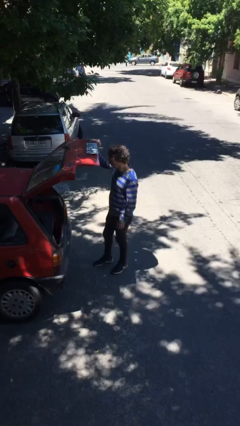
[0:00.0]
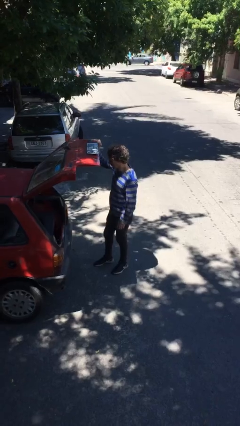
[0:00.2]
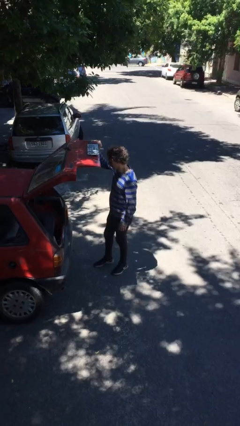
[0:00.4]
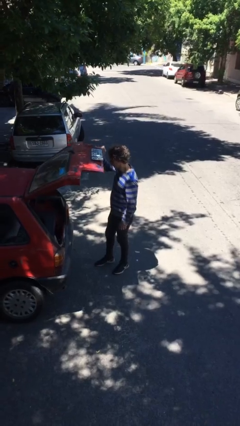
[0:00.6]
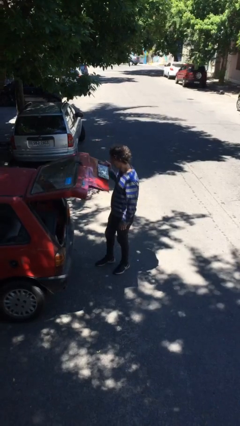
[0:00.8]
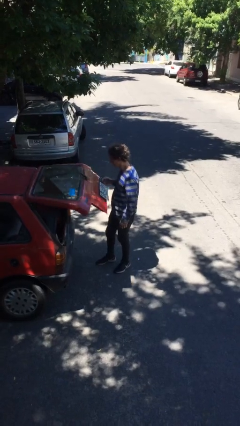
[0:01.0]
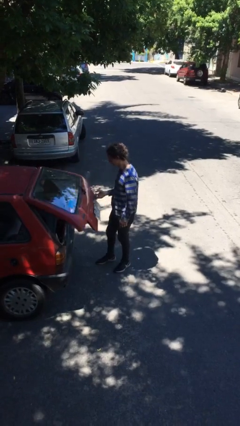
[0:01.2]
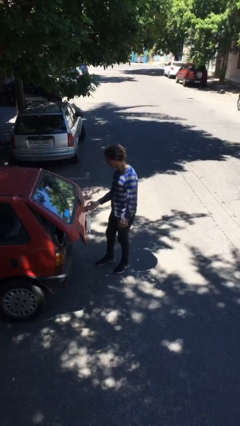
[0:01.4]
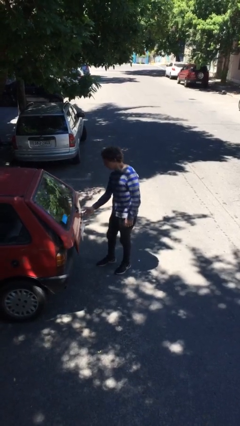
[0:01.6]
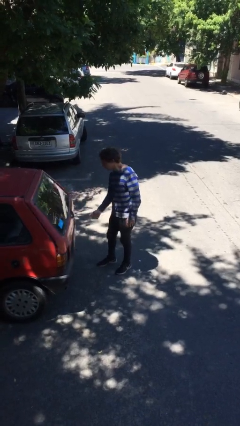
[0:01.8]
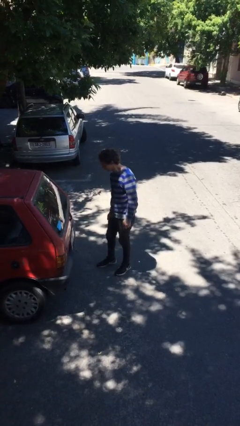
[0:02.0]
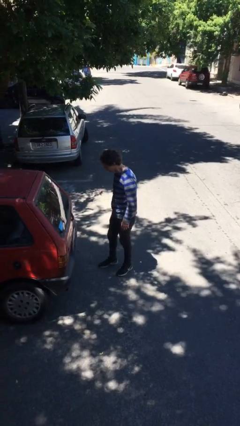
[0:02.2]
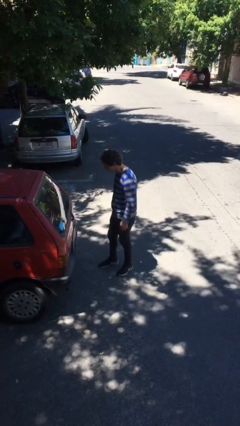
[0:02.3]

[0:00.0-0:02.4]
person closes car trunk

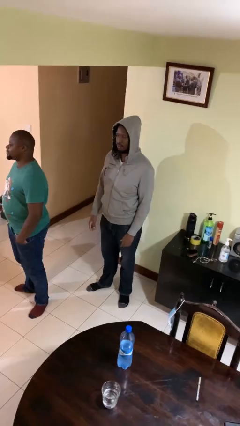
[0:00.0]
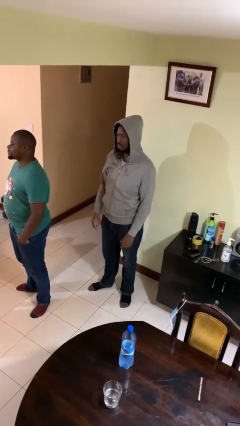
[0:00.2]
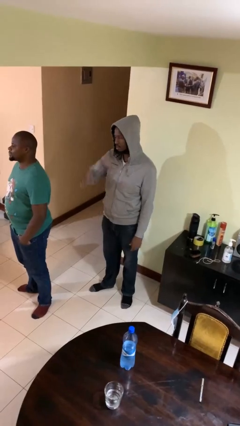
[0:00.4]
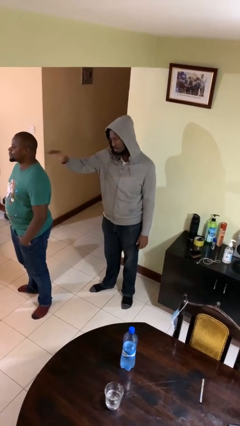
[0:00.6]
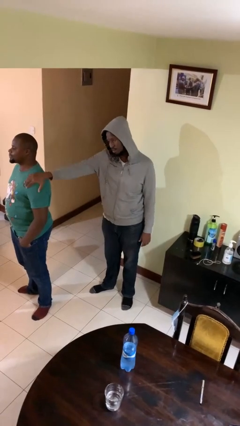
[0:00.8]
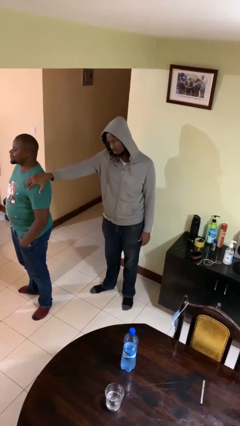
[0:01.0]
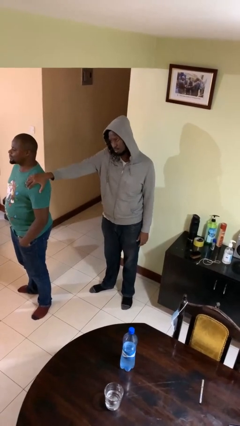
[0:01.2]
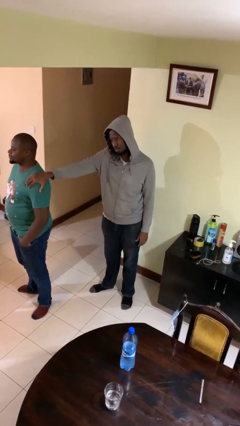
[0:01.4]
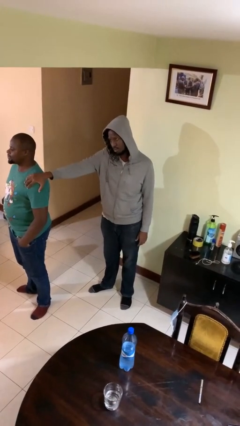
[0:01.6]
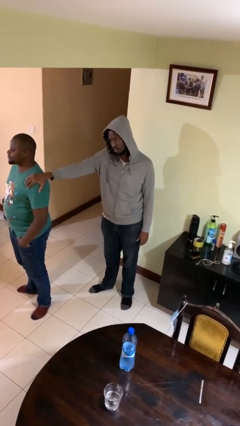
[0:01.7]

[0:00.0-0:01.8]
person grabs person by shoulder

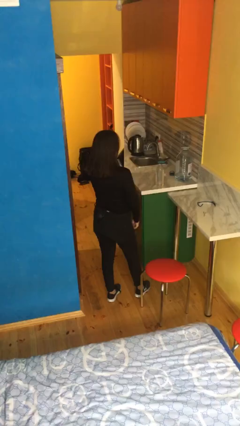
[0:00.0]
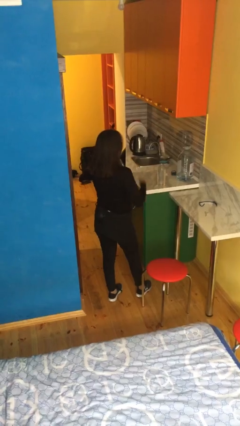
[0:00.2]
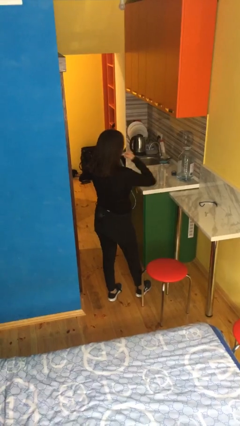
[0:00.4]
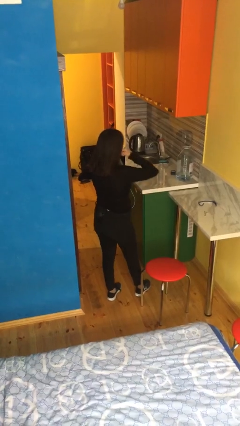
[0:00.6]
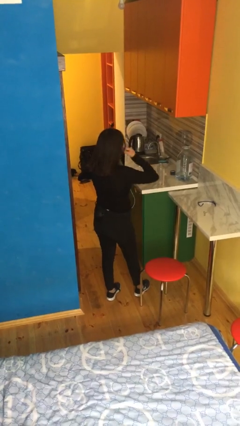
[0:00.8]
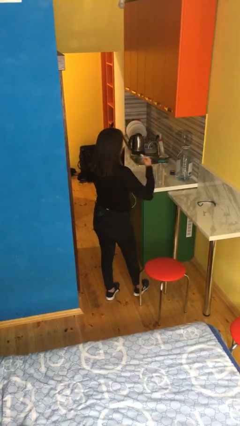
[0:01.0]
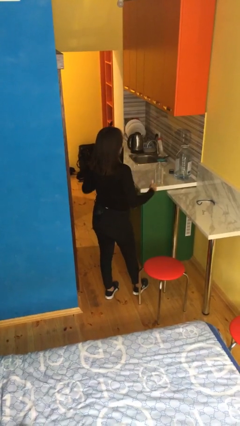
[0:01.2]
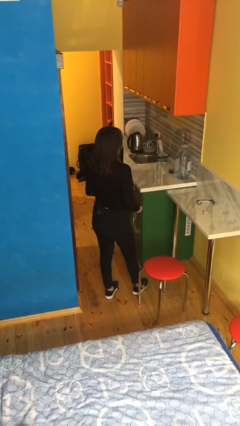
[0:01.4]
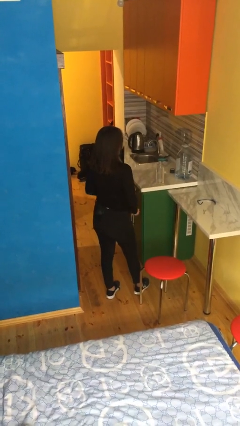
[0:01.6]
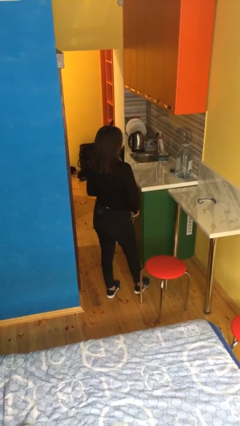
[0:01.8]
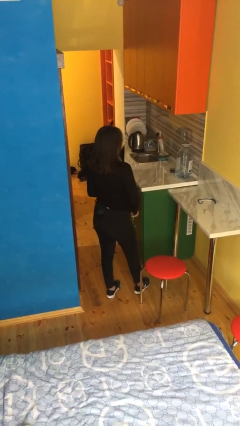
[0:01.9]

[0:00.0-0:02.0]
person takes off headphones

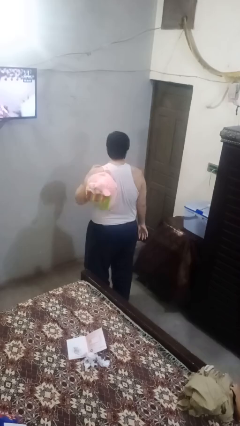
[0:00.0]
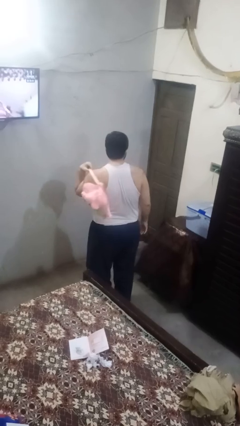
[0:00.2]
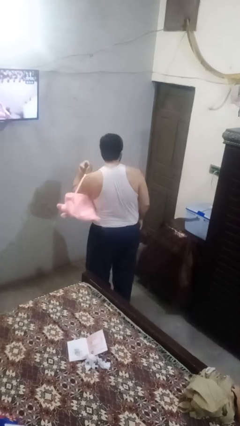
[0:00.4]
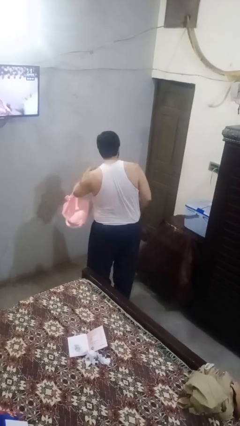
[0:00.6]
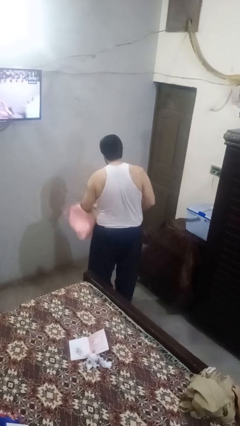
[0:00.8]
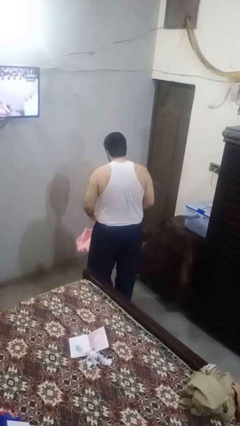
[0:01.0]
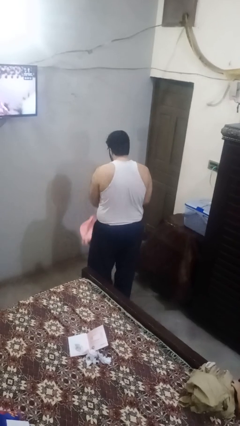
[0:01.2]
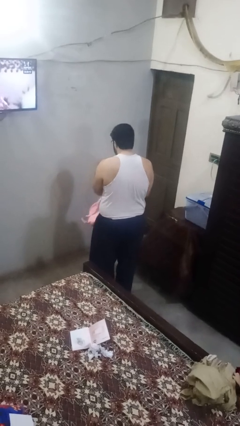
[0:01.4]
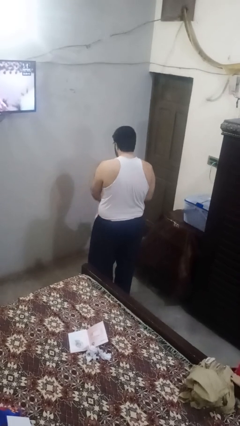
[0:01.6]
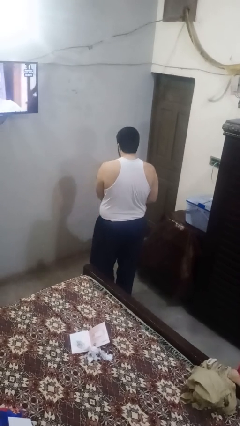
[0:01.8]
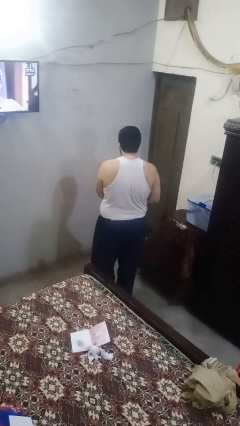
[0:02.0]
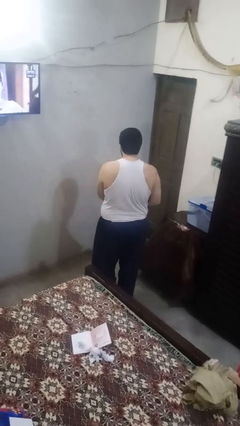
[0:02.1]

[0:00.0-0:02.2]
person takes off backpack

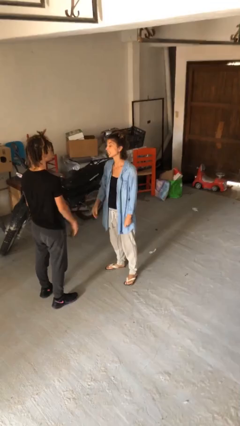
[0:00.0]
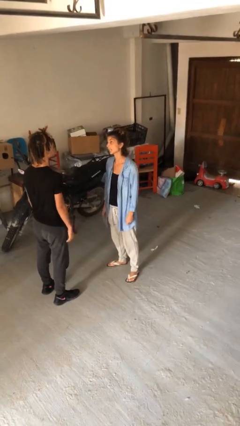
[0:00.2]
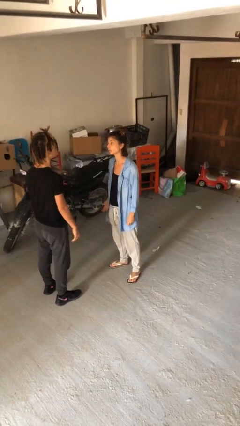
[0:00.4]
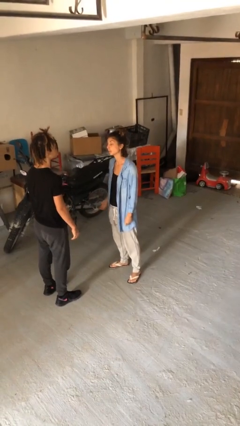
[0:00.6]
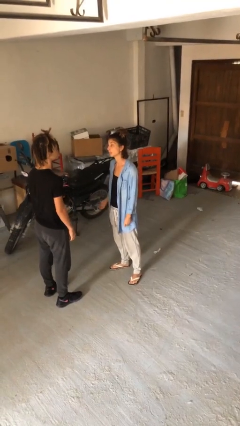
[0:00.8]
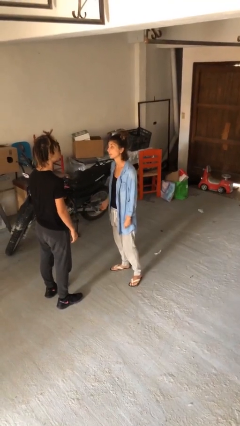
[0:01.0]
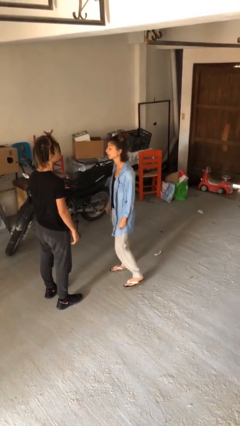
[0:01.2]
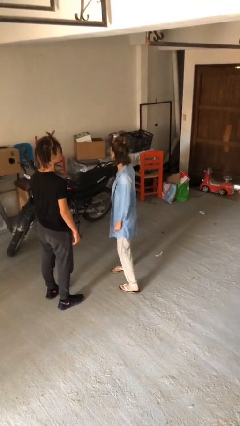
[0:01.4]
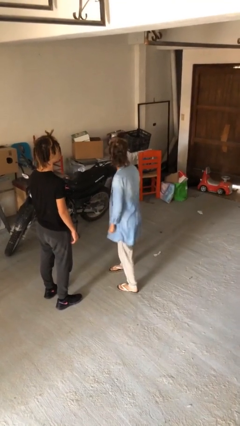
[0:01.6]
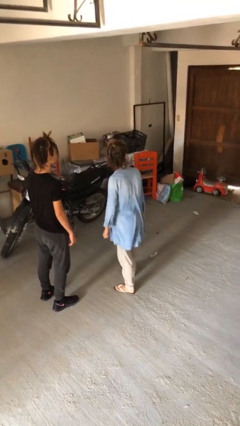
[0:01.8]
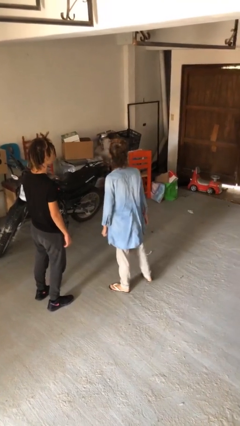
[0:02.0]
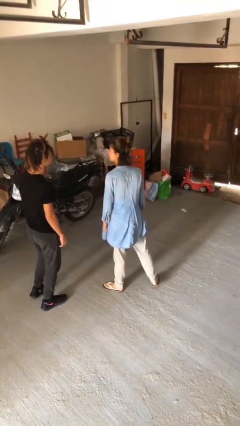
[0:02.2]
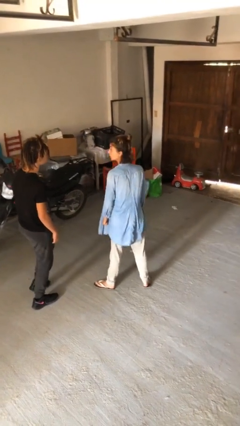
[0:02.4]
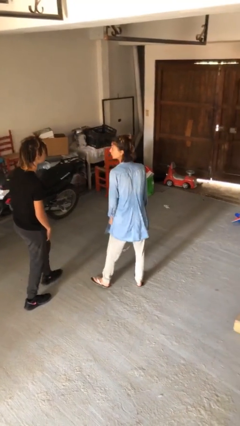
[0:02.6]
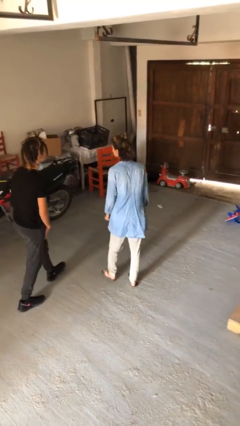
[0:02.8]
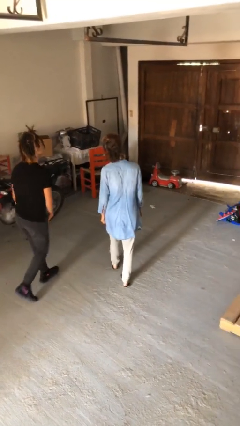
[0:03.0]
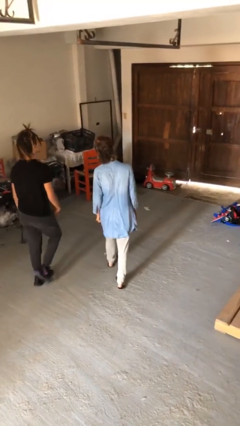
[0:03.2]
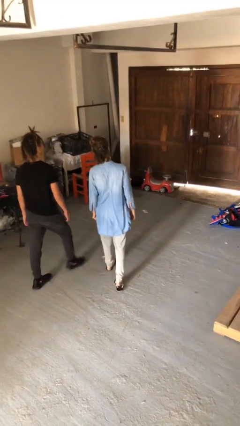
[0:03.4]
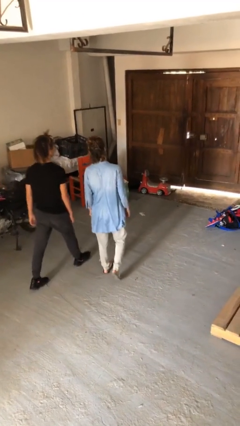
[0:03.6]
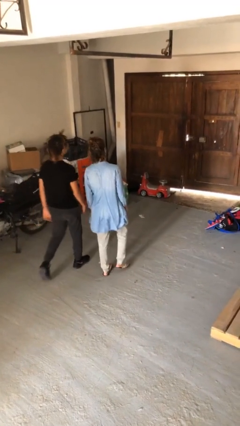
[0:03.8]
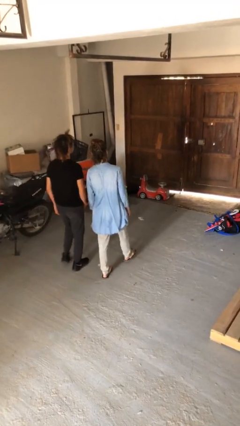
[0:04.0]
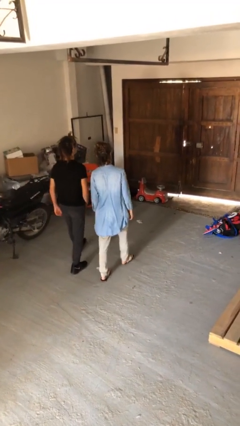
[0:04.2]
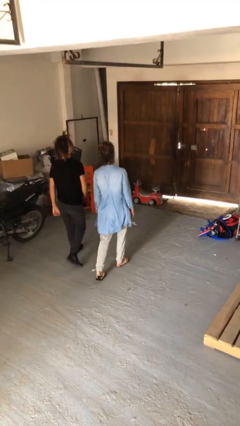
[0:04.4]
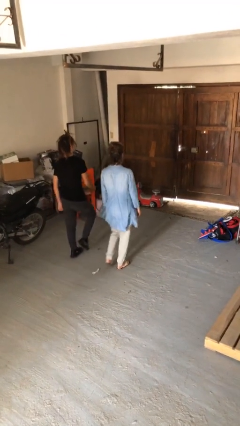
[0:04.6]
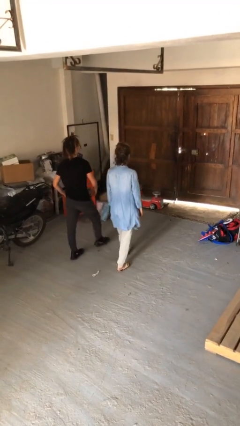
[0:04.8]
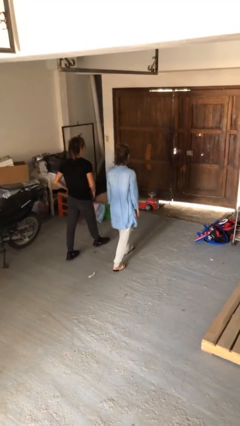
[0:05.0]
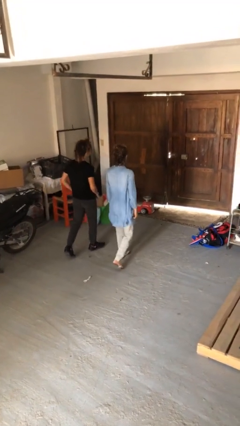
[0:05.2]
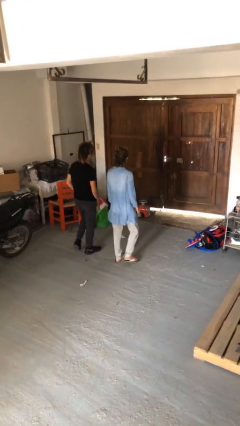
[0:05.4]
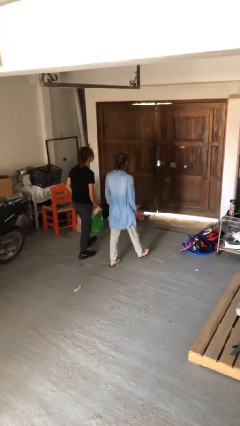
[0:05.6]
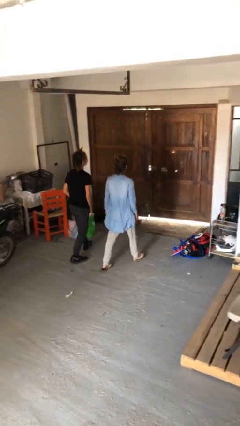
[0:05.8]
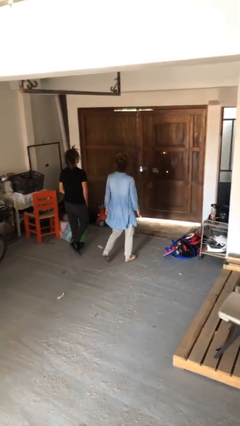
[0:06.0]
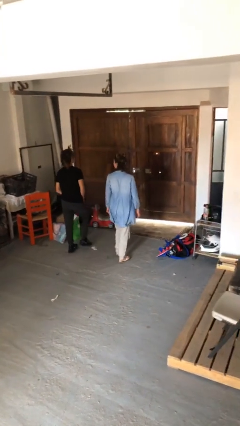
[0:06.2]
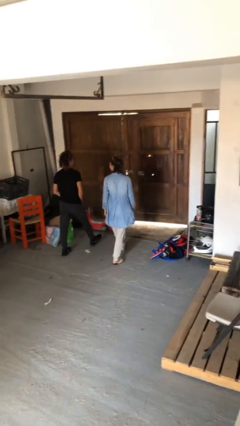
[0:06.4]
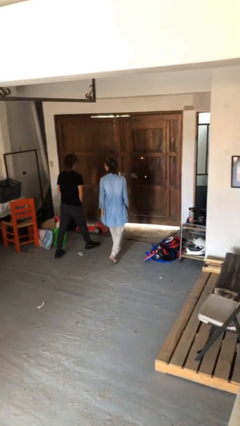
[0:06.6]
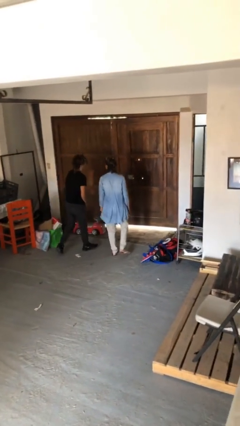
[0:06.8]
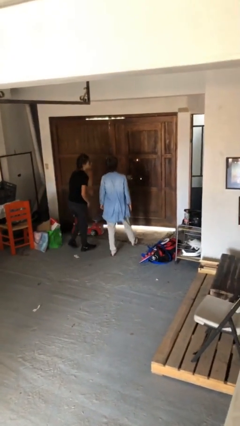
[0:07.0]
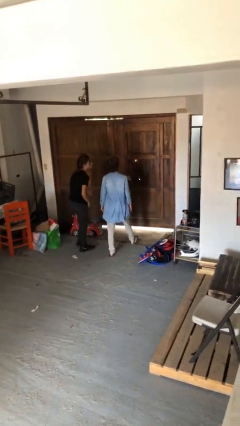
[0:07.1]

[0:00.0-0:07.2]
person talks to person

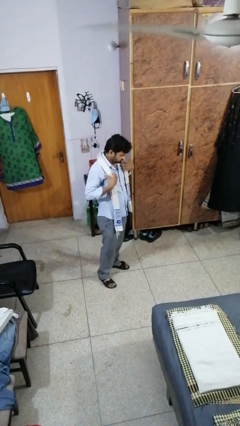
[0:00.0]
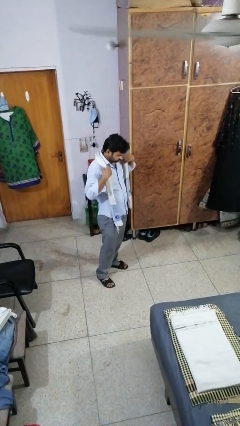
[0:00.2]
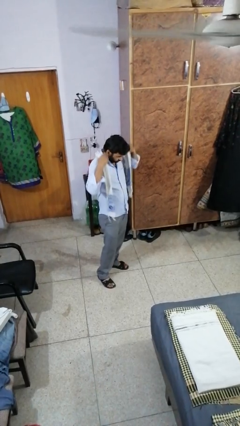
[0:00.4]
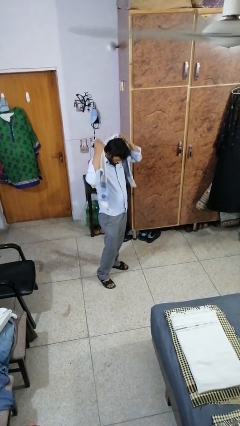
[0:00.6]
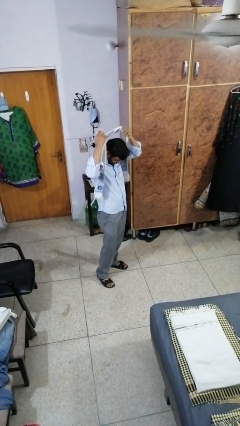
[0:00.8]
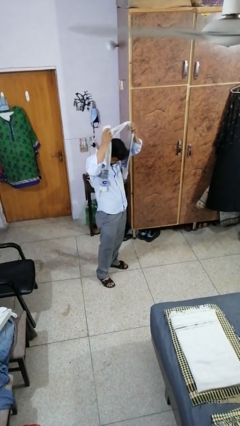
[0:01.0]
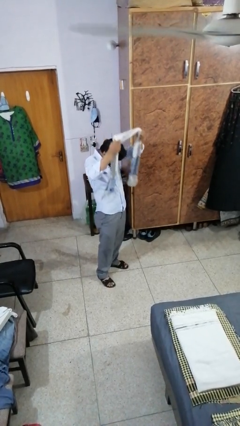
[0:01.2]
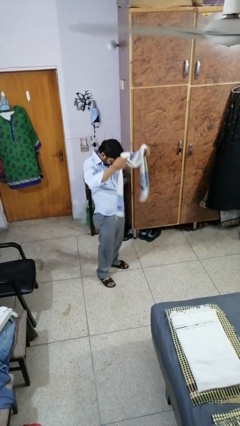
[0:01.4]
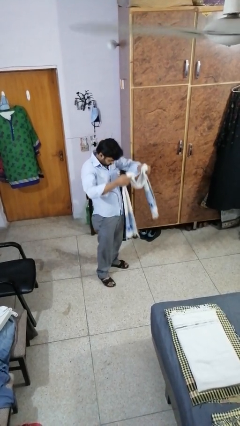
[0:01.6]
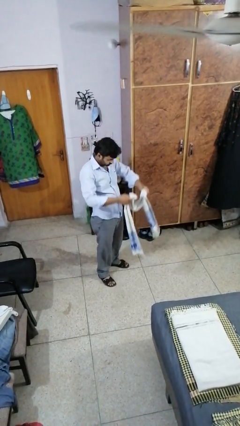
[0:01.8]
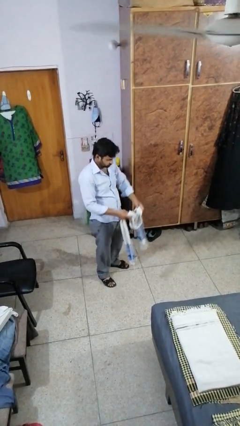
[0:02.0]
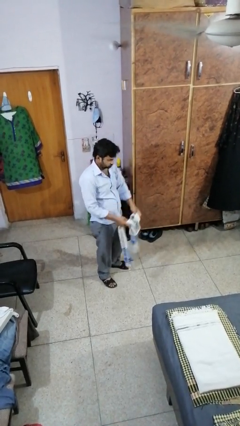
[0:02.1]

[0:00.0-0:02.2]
person takes off scarf
